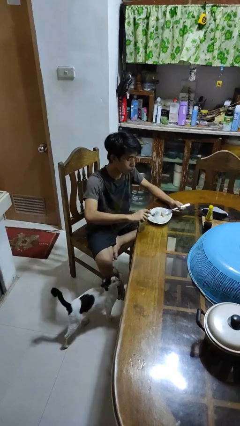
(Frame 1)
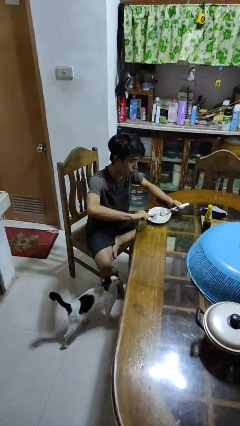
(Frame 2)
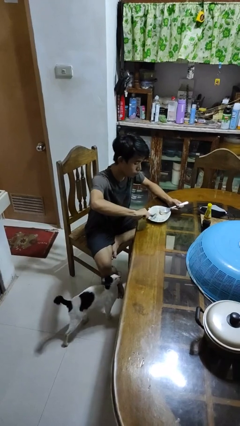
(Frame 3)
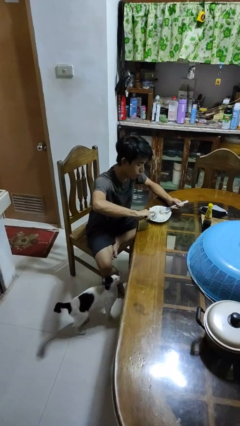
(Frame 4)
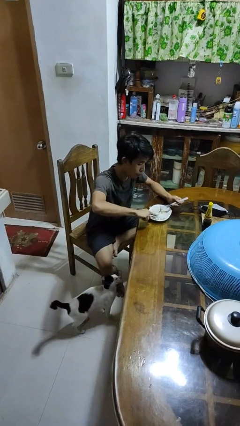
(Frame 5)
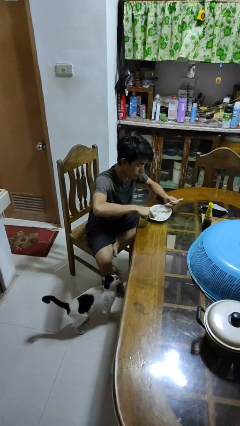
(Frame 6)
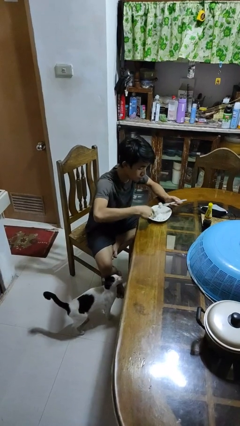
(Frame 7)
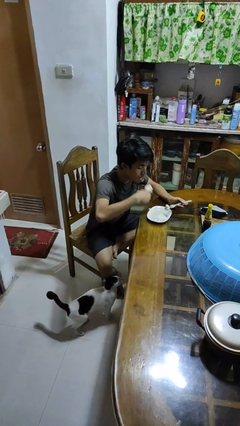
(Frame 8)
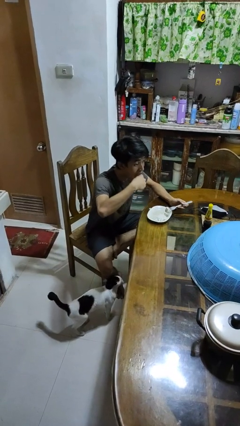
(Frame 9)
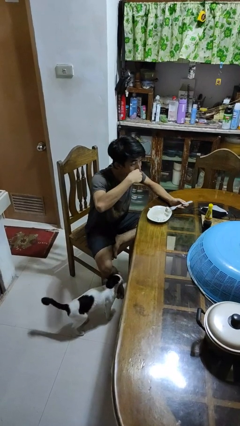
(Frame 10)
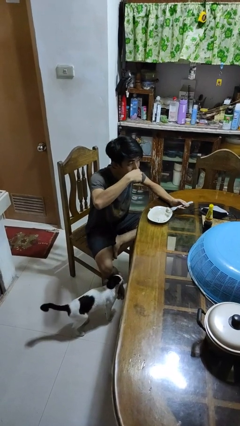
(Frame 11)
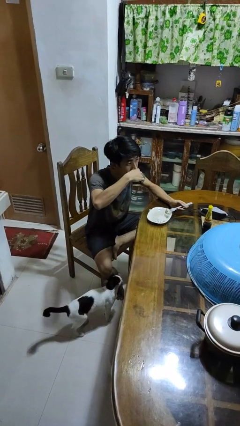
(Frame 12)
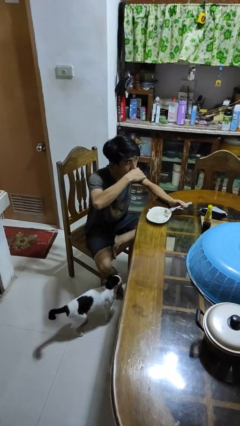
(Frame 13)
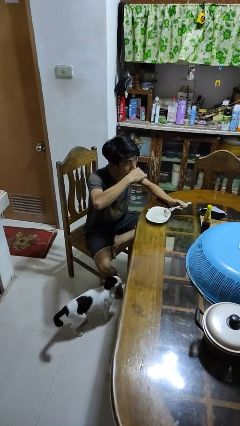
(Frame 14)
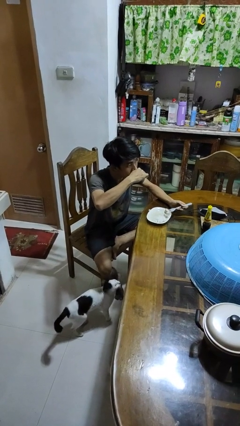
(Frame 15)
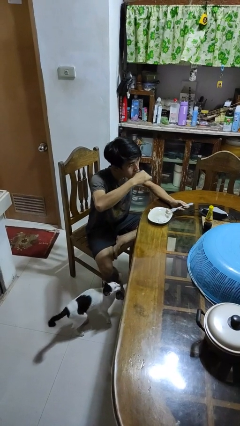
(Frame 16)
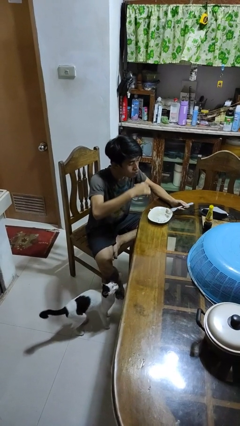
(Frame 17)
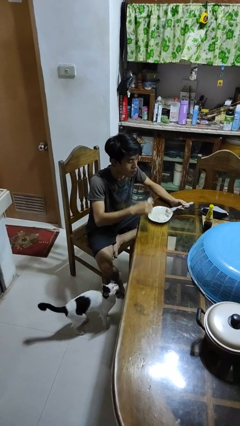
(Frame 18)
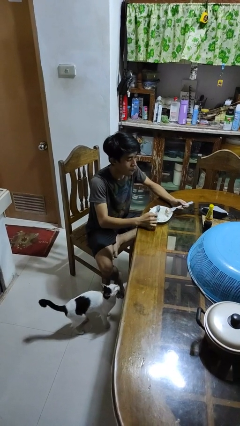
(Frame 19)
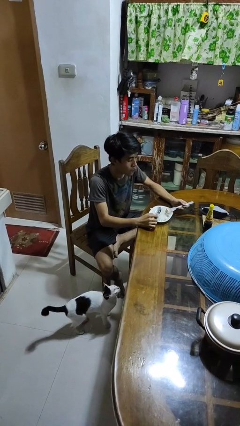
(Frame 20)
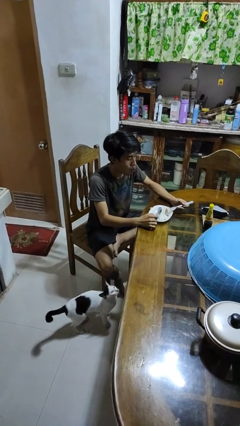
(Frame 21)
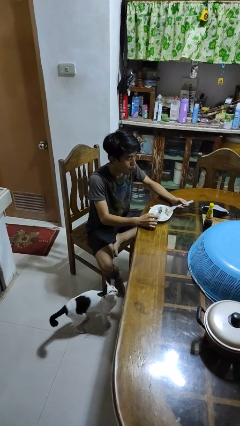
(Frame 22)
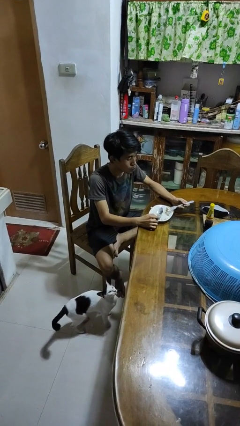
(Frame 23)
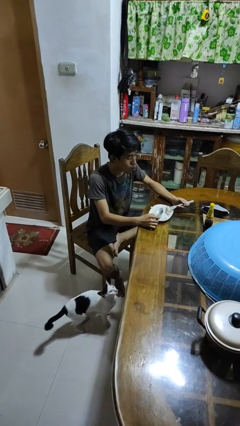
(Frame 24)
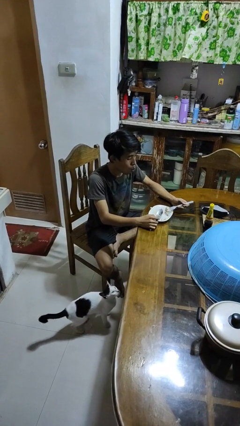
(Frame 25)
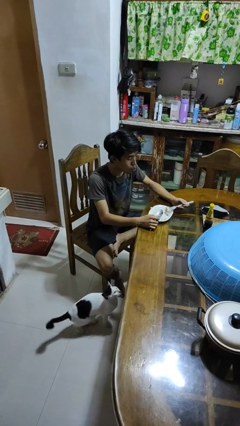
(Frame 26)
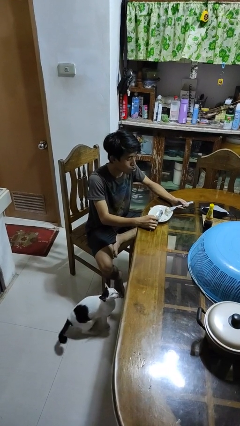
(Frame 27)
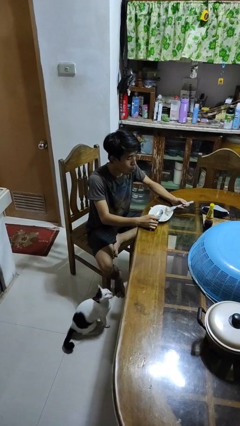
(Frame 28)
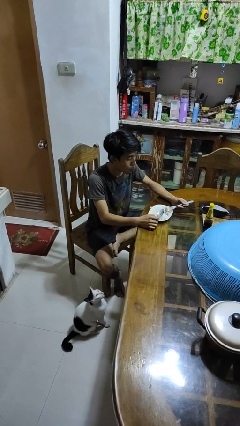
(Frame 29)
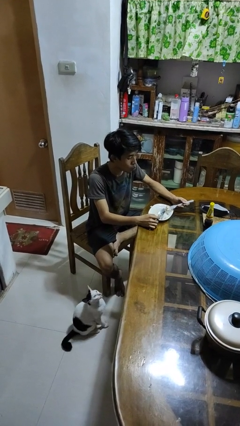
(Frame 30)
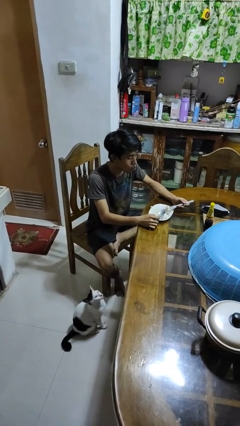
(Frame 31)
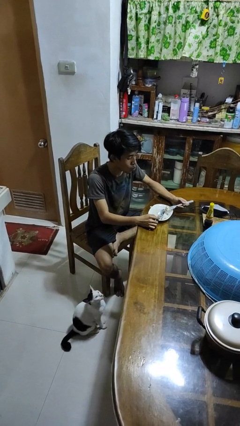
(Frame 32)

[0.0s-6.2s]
person eats with utensil

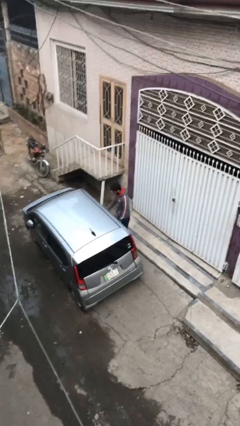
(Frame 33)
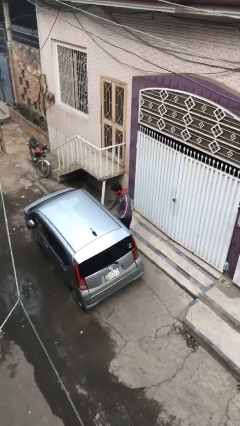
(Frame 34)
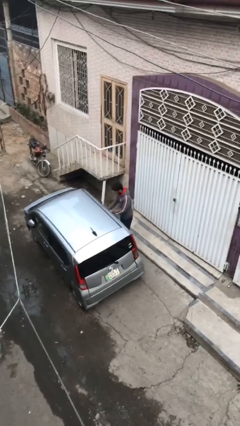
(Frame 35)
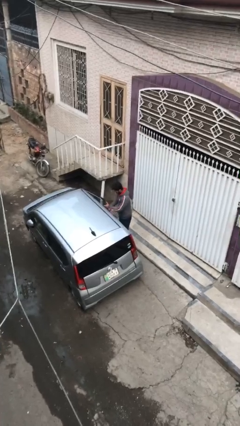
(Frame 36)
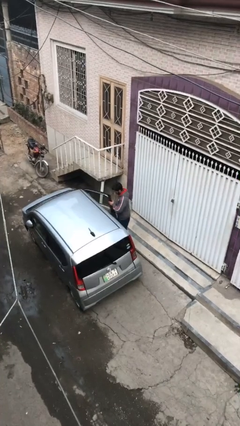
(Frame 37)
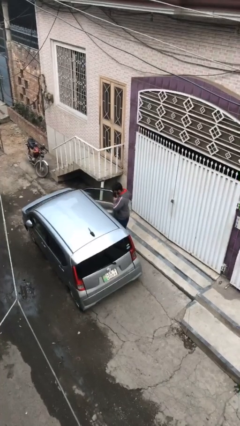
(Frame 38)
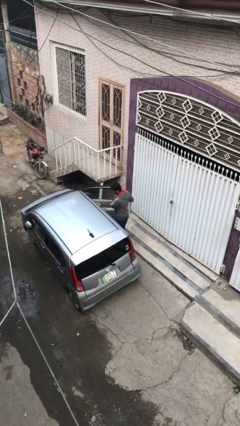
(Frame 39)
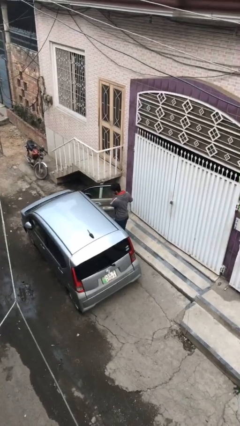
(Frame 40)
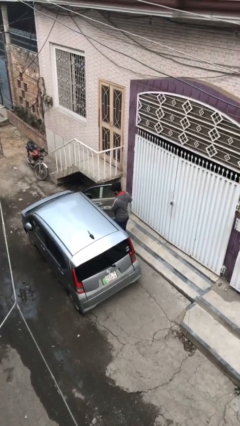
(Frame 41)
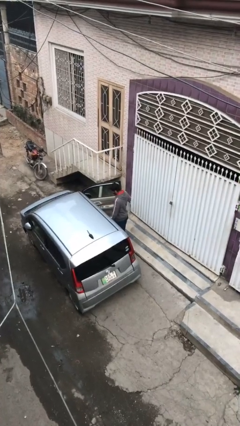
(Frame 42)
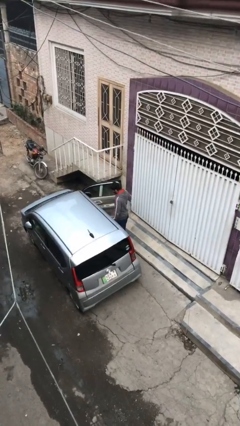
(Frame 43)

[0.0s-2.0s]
person opens car door

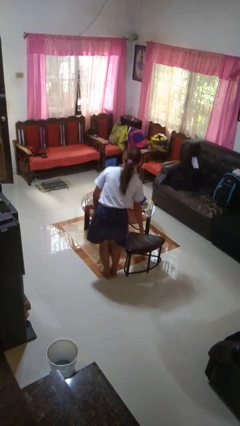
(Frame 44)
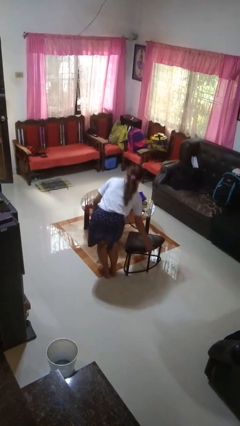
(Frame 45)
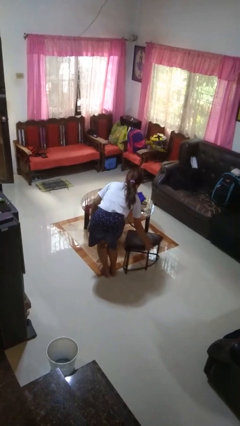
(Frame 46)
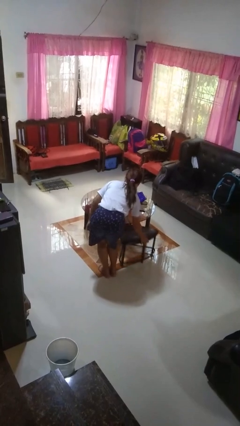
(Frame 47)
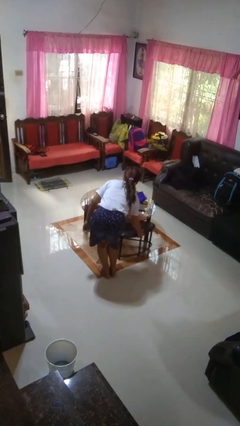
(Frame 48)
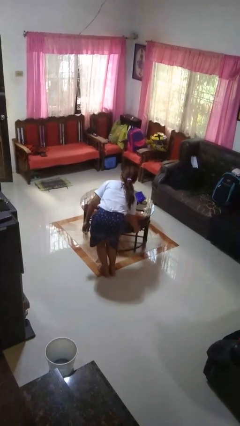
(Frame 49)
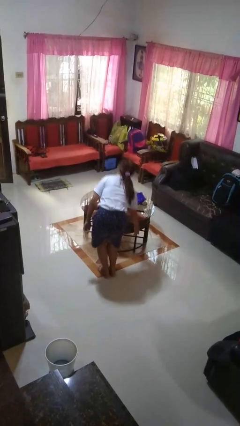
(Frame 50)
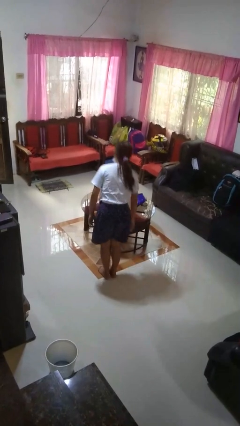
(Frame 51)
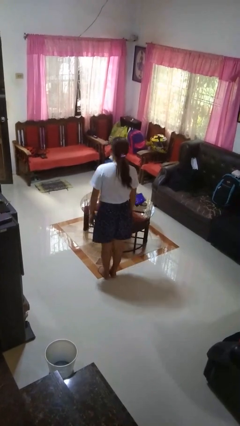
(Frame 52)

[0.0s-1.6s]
person pushes in chair

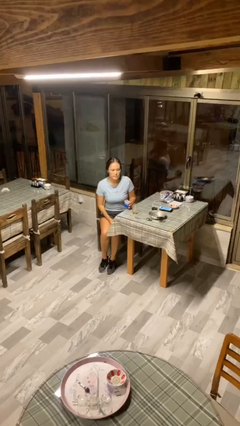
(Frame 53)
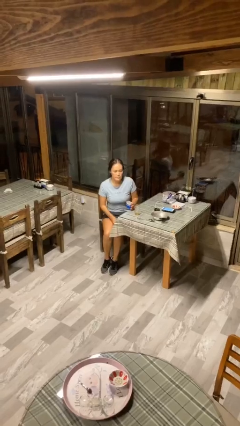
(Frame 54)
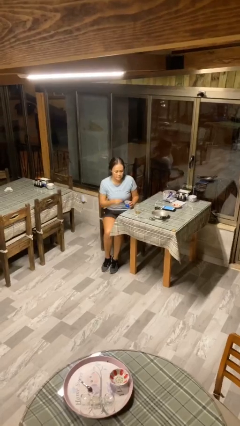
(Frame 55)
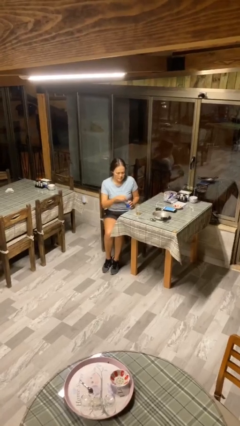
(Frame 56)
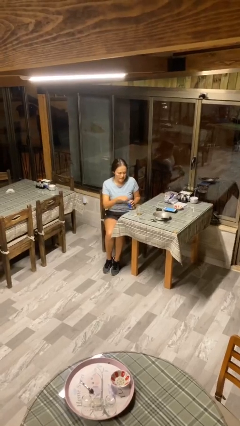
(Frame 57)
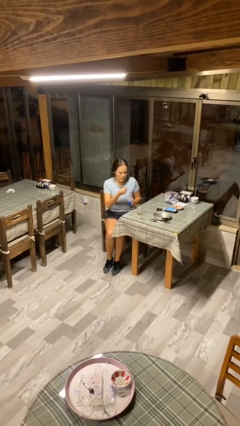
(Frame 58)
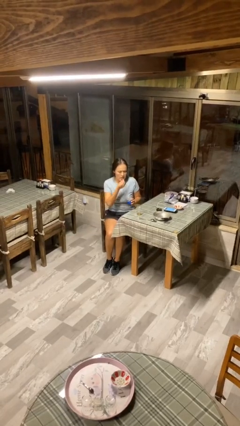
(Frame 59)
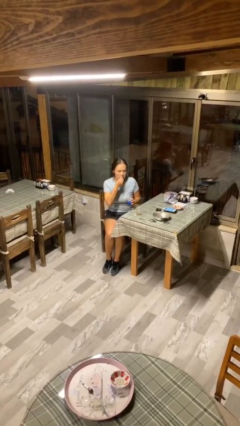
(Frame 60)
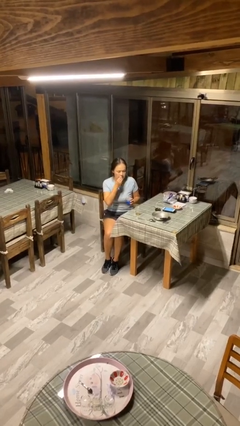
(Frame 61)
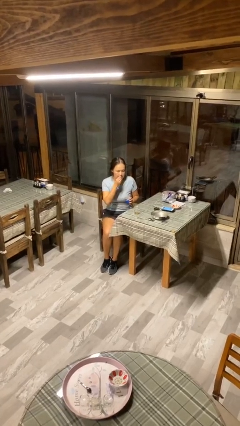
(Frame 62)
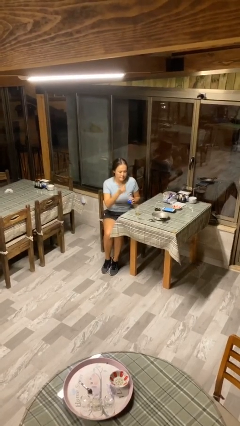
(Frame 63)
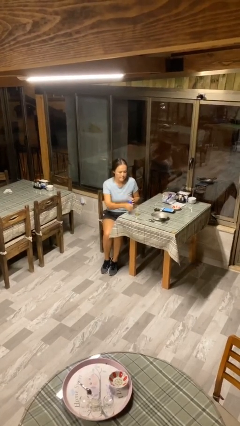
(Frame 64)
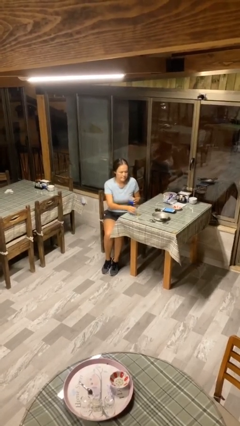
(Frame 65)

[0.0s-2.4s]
person takes medicine pills

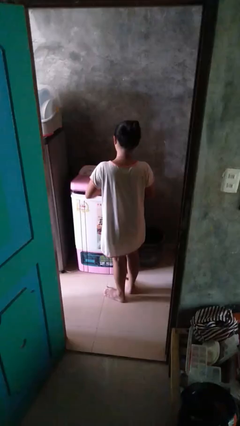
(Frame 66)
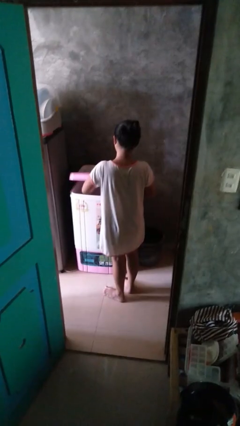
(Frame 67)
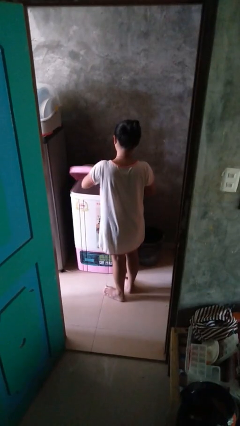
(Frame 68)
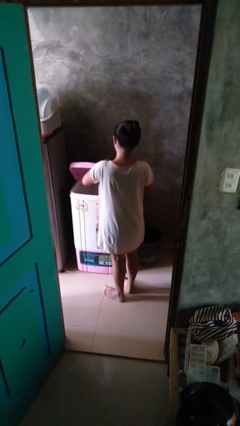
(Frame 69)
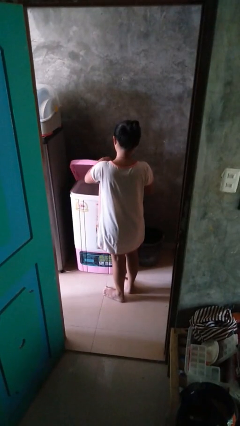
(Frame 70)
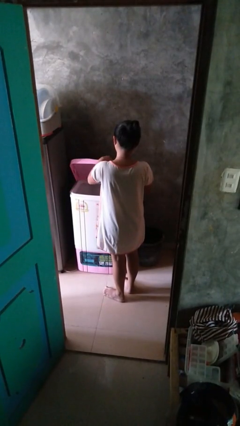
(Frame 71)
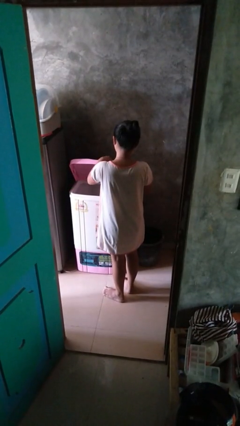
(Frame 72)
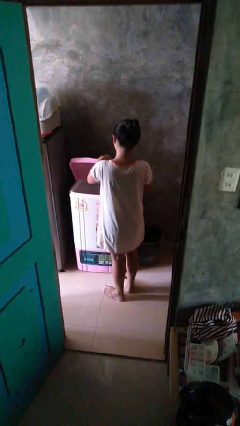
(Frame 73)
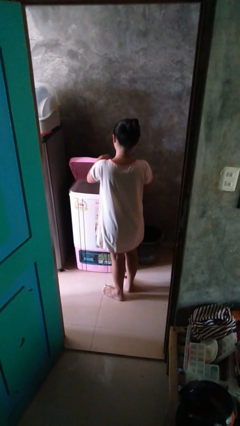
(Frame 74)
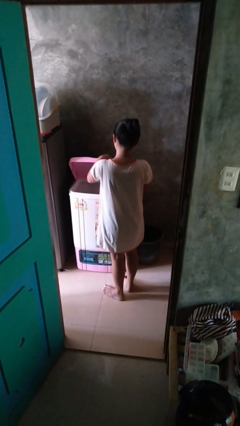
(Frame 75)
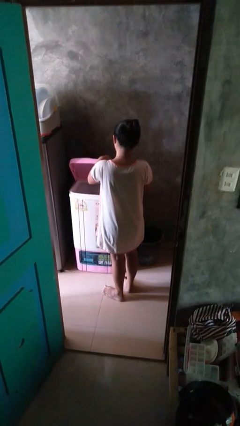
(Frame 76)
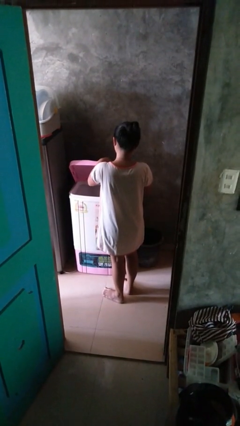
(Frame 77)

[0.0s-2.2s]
person opens clothes washer

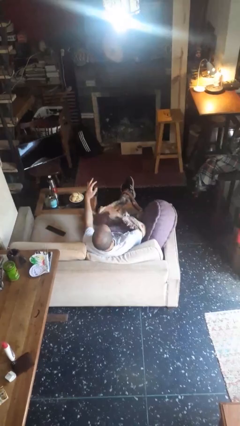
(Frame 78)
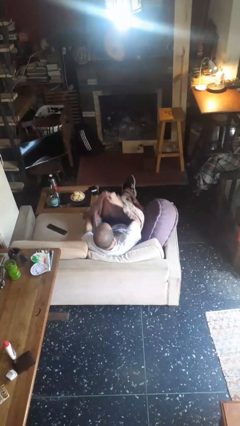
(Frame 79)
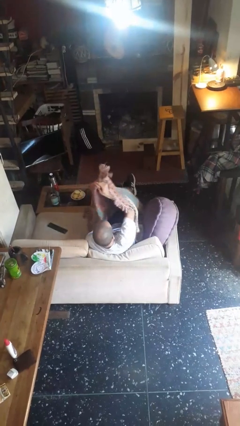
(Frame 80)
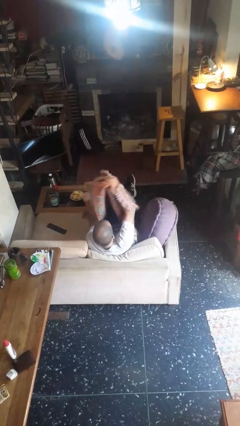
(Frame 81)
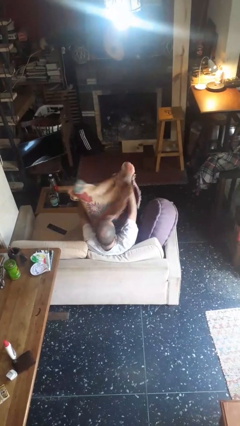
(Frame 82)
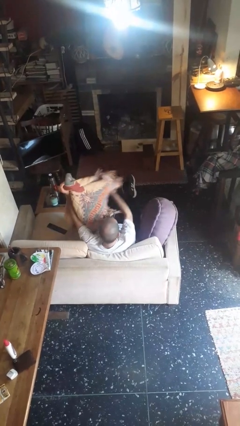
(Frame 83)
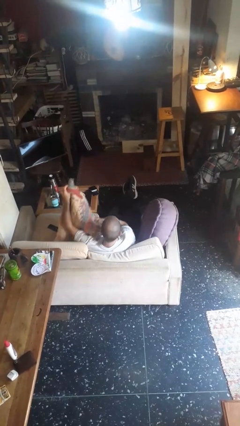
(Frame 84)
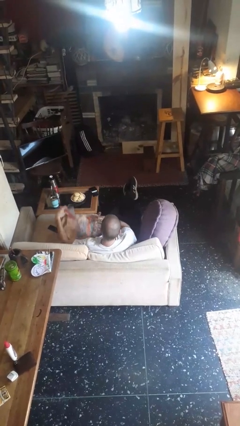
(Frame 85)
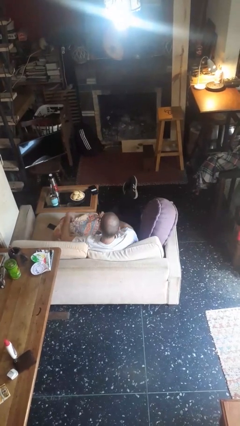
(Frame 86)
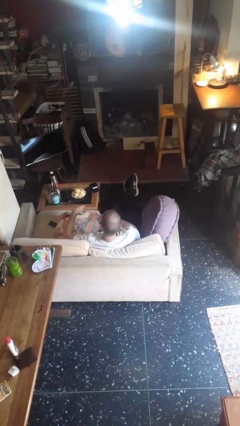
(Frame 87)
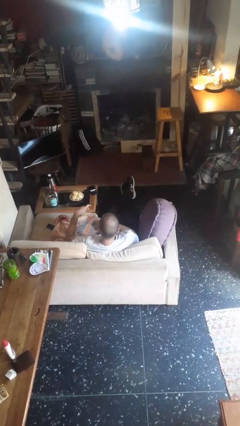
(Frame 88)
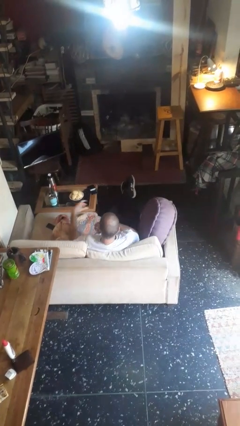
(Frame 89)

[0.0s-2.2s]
person uncovers with blanket

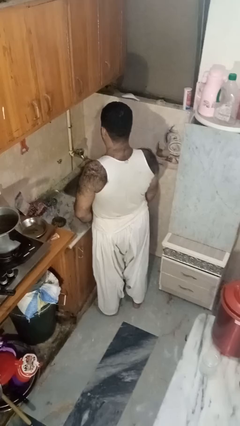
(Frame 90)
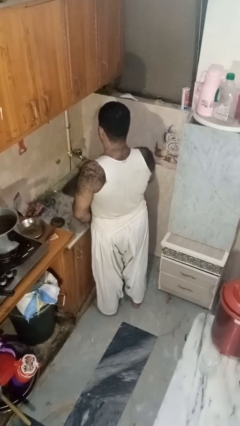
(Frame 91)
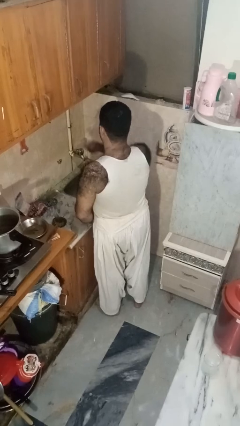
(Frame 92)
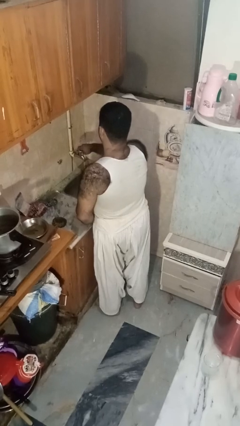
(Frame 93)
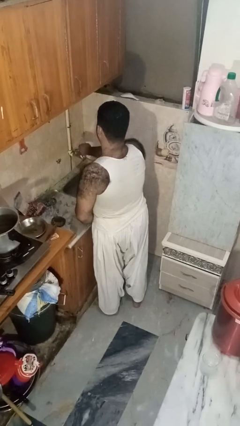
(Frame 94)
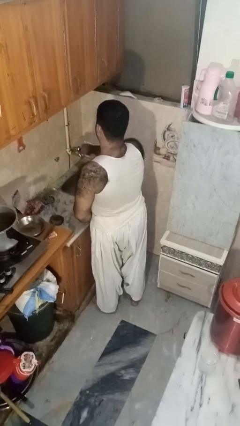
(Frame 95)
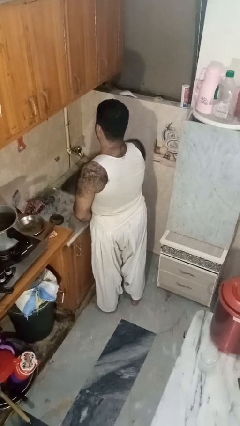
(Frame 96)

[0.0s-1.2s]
person turns off faucet
